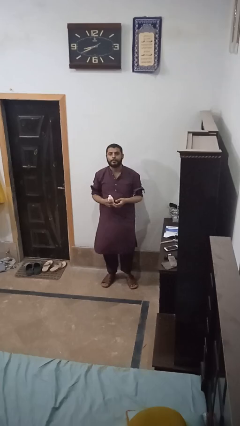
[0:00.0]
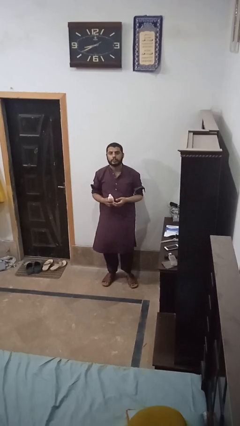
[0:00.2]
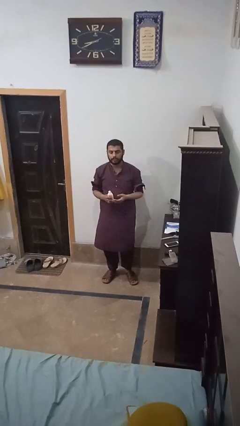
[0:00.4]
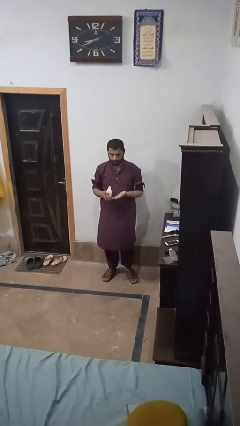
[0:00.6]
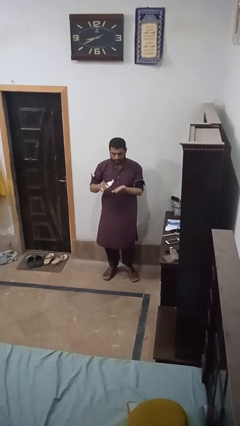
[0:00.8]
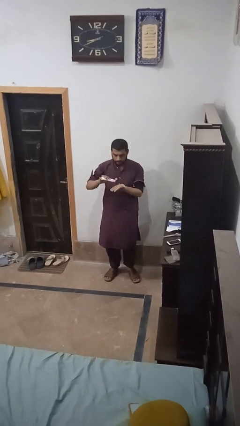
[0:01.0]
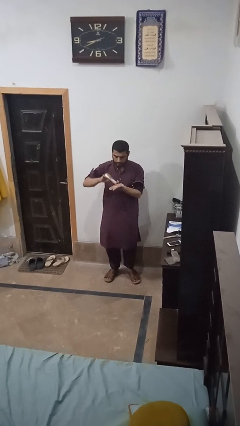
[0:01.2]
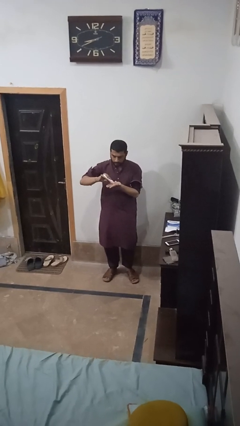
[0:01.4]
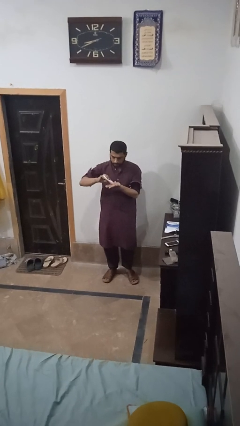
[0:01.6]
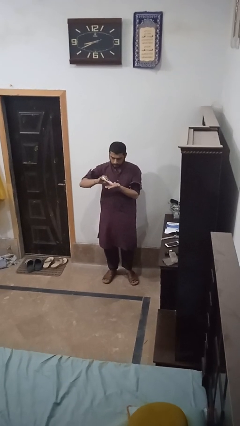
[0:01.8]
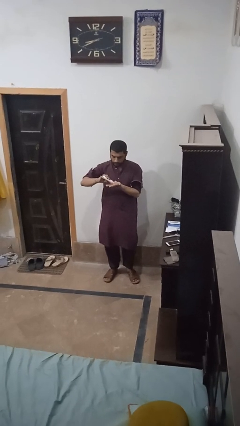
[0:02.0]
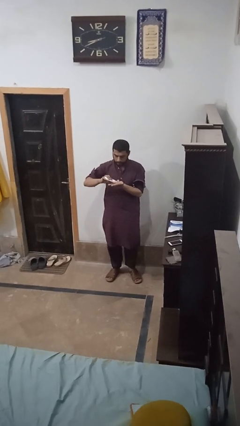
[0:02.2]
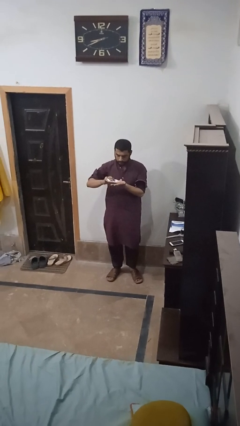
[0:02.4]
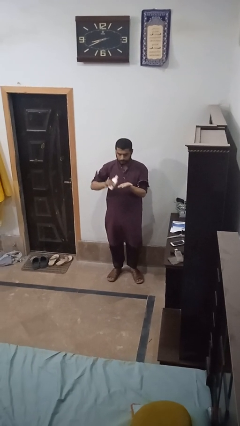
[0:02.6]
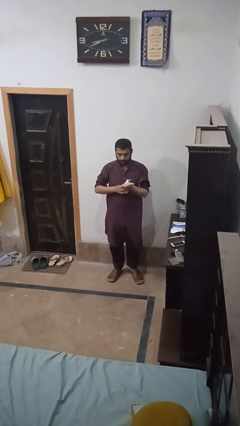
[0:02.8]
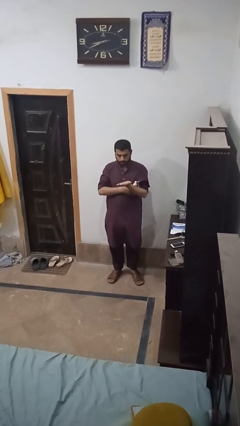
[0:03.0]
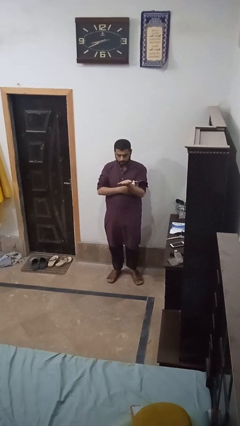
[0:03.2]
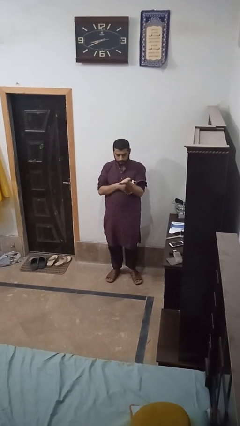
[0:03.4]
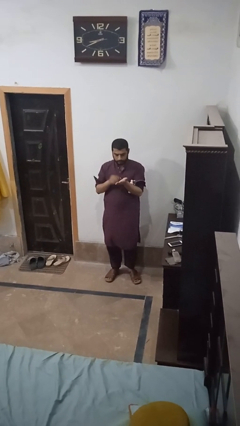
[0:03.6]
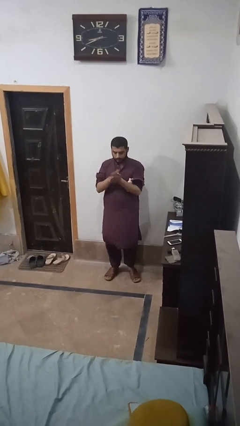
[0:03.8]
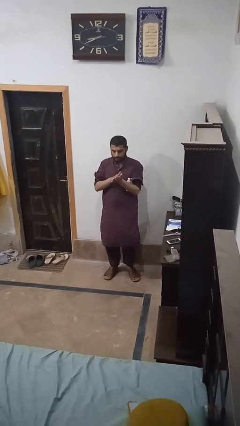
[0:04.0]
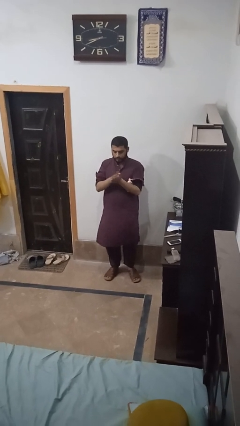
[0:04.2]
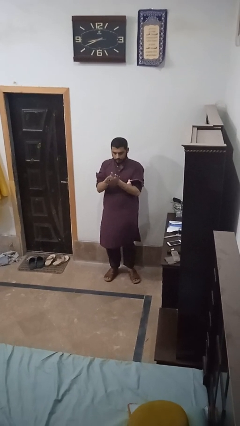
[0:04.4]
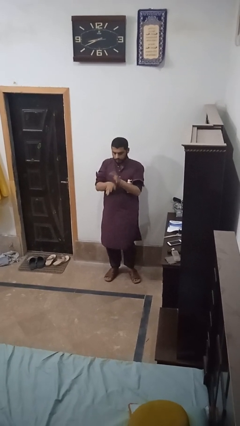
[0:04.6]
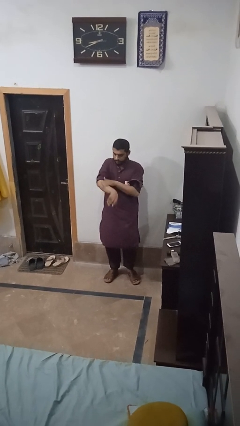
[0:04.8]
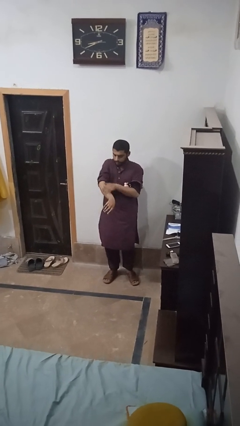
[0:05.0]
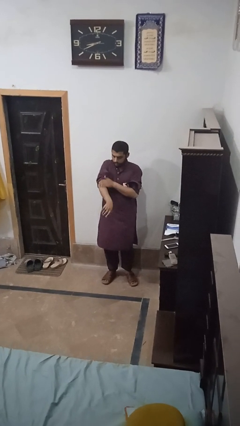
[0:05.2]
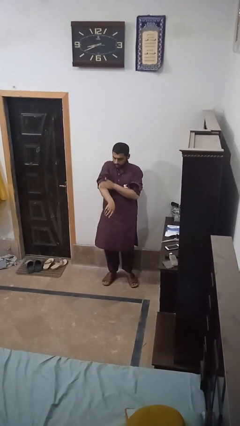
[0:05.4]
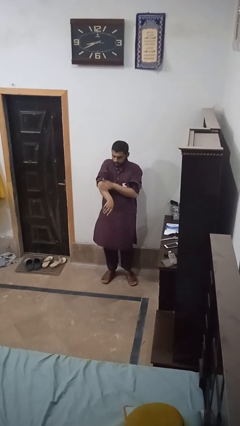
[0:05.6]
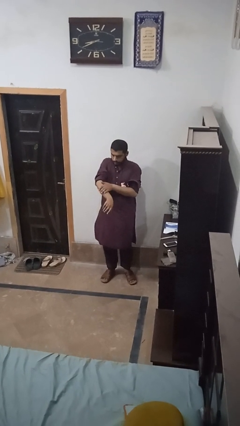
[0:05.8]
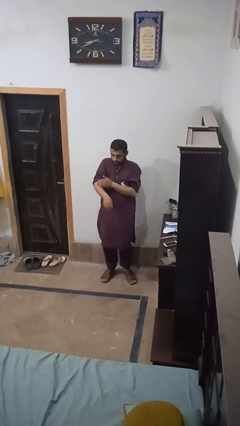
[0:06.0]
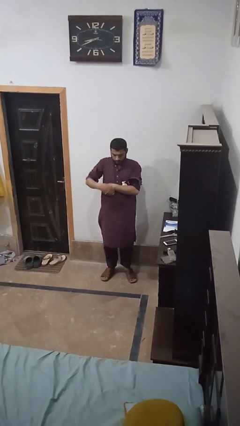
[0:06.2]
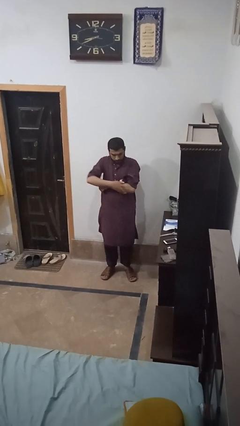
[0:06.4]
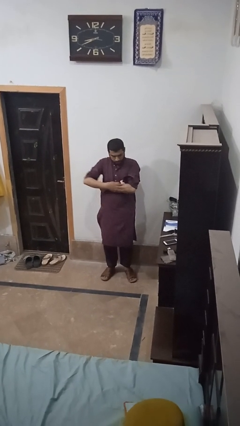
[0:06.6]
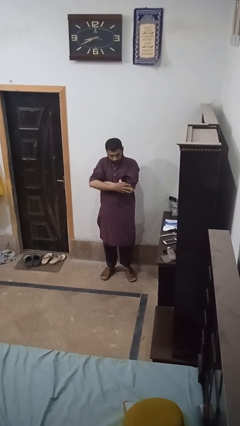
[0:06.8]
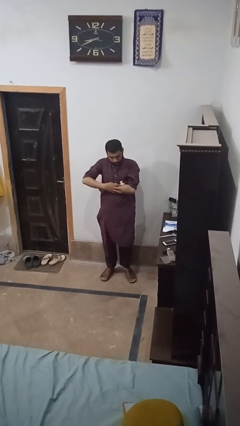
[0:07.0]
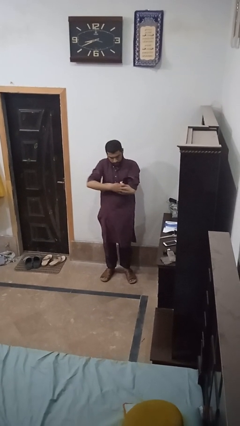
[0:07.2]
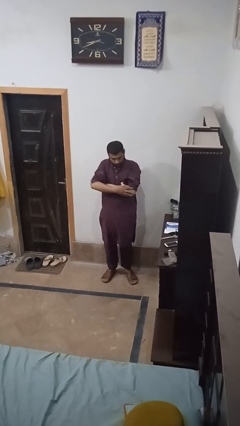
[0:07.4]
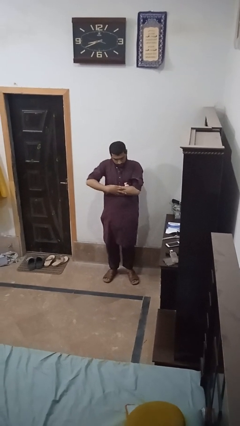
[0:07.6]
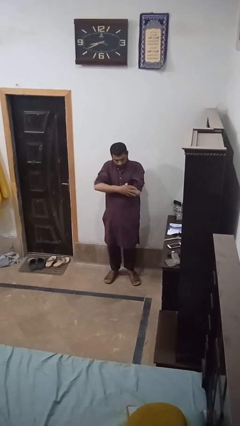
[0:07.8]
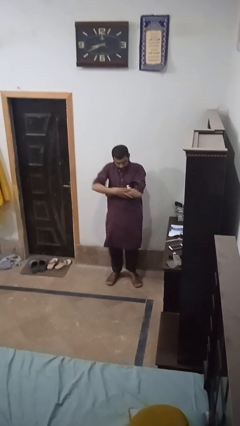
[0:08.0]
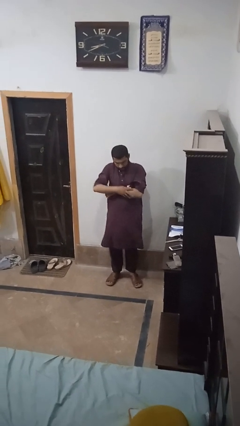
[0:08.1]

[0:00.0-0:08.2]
person applies sunscreen

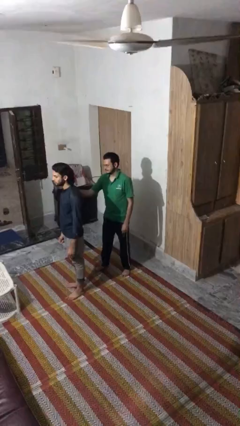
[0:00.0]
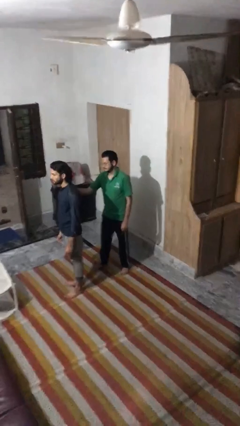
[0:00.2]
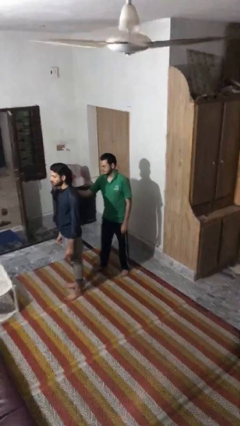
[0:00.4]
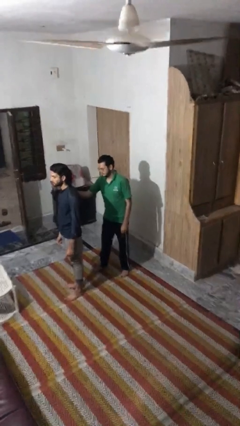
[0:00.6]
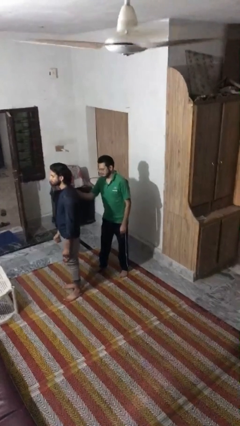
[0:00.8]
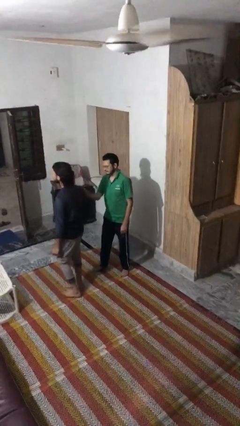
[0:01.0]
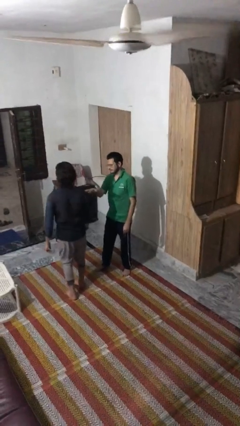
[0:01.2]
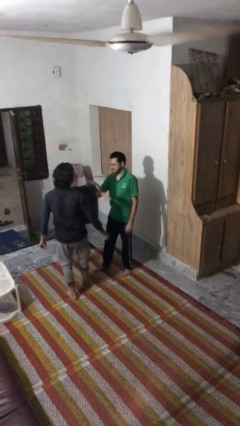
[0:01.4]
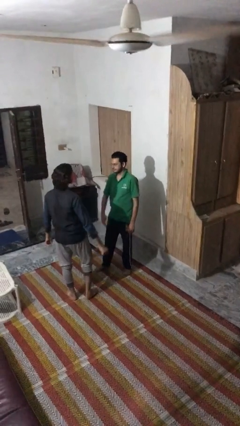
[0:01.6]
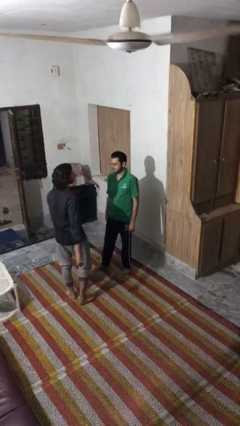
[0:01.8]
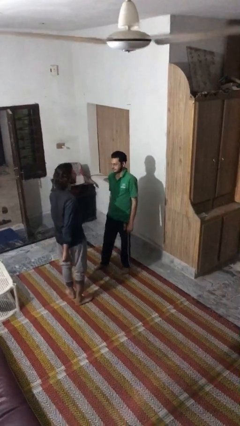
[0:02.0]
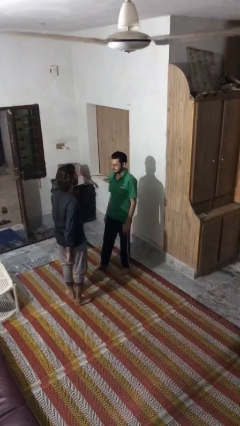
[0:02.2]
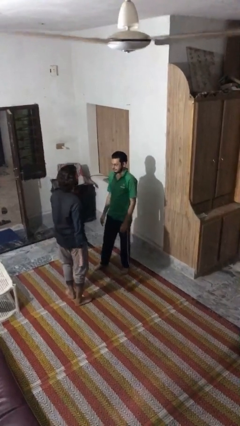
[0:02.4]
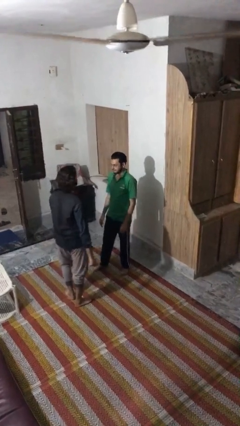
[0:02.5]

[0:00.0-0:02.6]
person spins person around

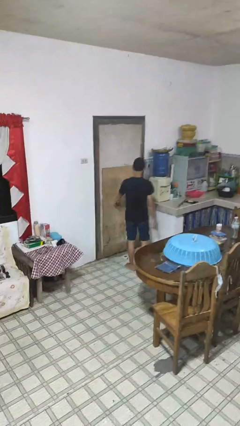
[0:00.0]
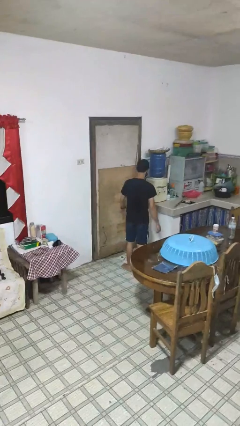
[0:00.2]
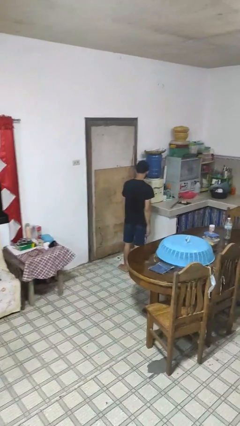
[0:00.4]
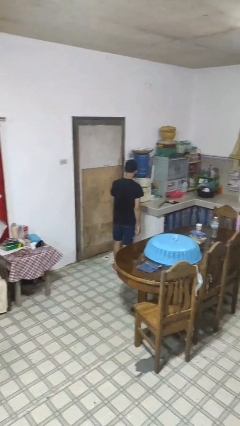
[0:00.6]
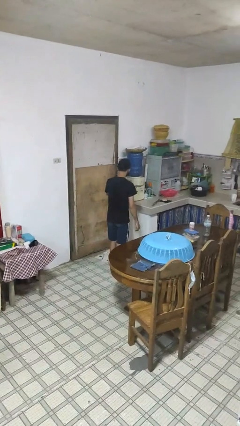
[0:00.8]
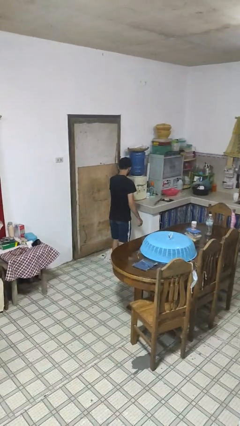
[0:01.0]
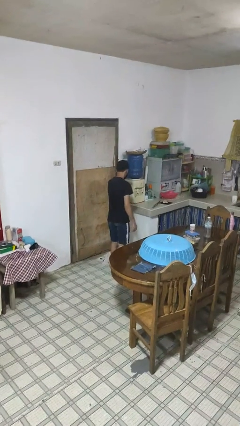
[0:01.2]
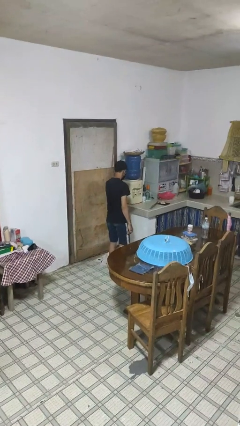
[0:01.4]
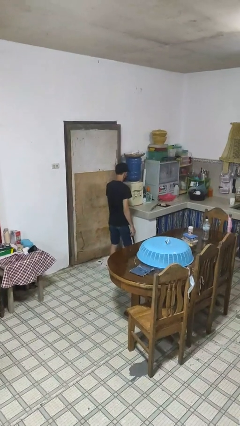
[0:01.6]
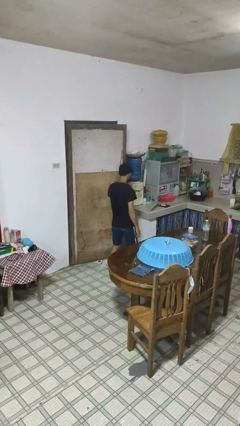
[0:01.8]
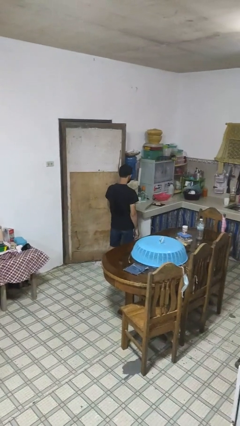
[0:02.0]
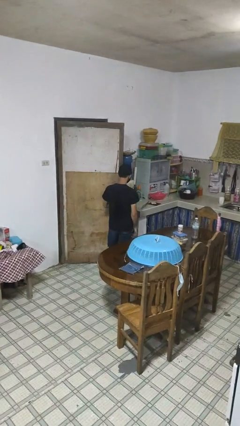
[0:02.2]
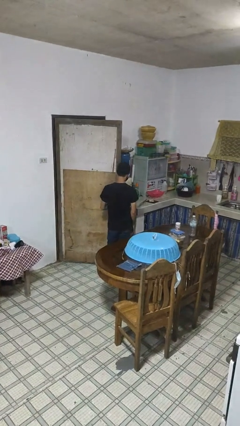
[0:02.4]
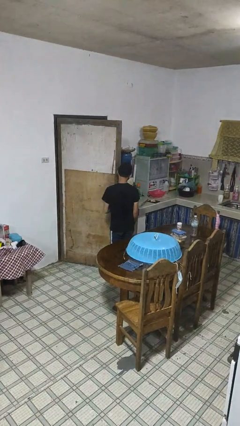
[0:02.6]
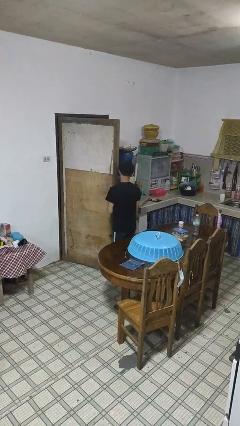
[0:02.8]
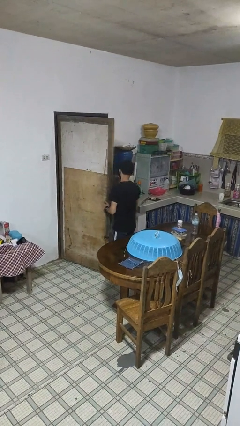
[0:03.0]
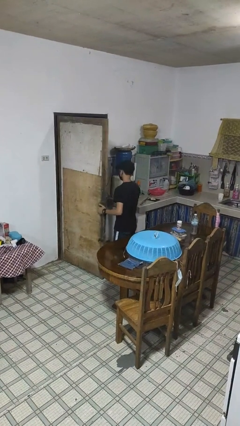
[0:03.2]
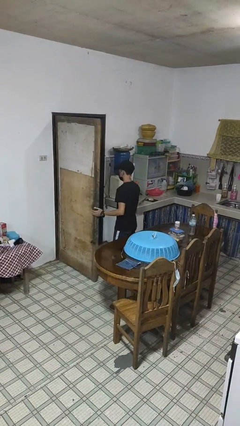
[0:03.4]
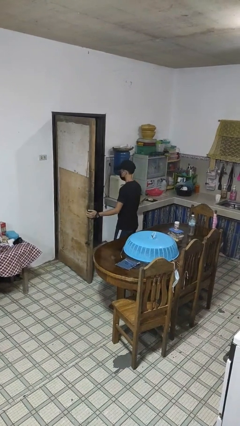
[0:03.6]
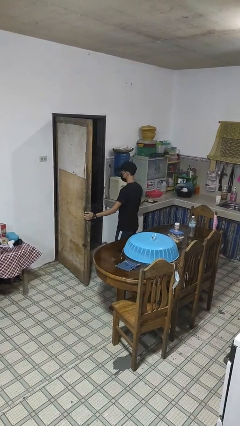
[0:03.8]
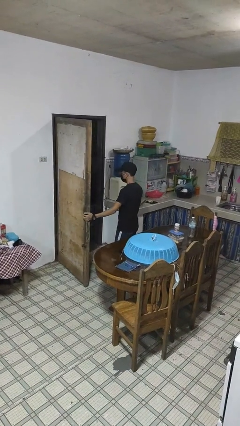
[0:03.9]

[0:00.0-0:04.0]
person opens facility door

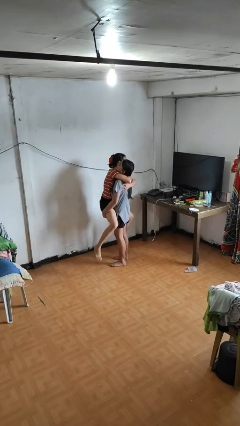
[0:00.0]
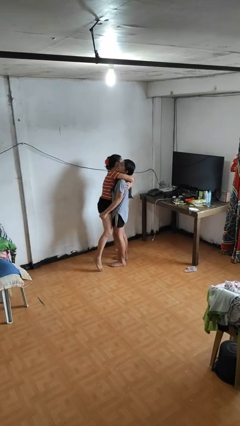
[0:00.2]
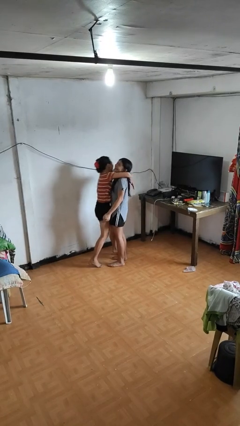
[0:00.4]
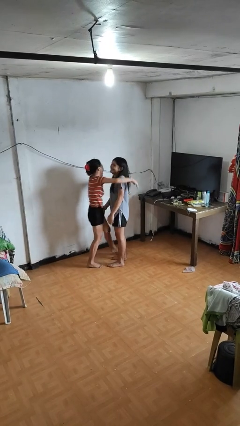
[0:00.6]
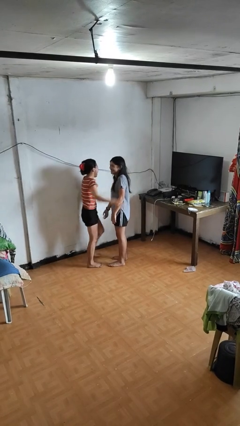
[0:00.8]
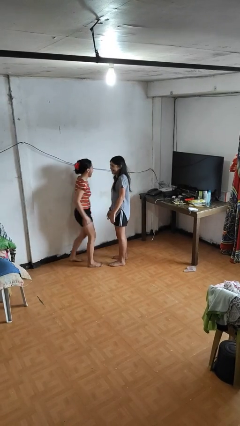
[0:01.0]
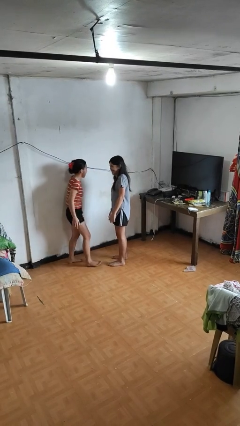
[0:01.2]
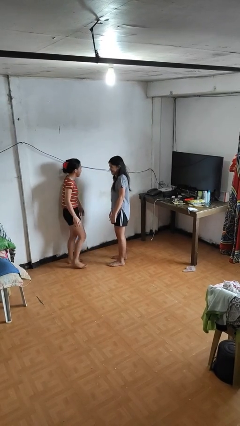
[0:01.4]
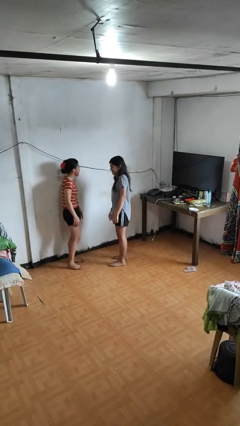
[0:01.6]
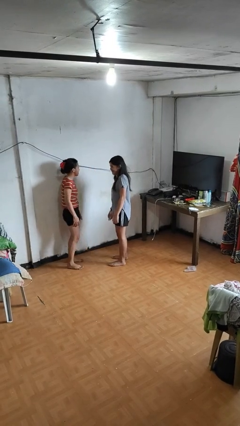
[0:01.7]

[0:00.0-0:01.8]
person puts down person

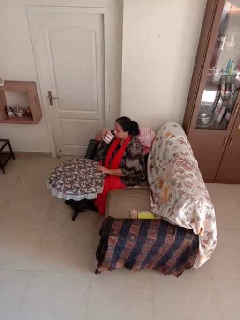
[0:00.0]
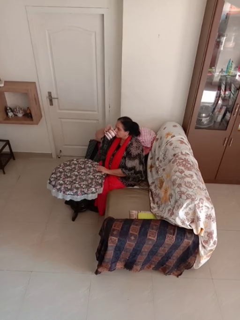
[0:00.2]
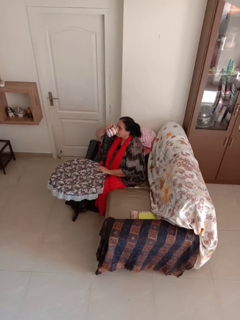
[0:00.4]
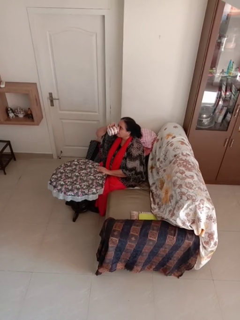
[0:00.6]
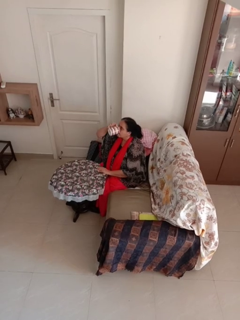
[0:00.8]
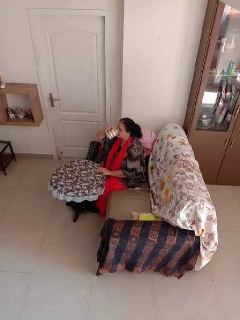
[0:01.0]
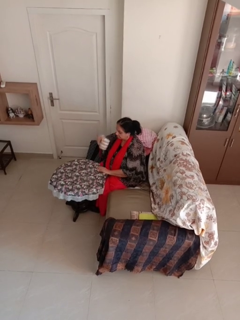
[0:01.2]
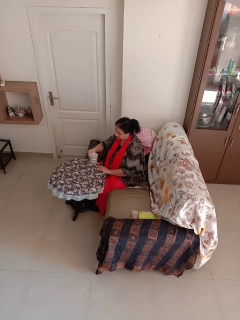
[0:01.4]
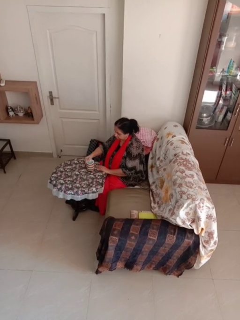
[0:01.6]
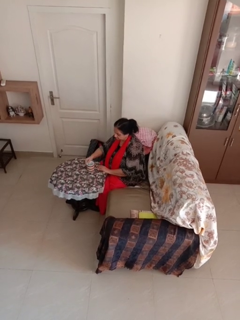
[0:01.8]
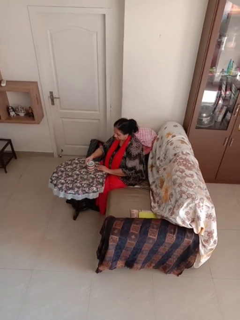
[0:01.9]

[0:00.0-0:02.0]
person drinks from mug
